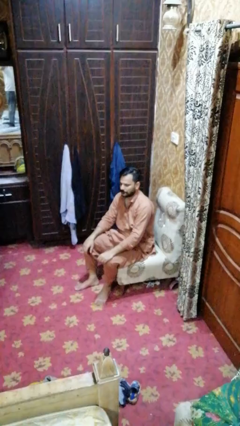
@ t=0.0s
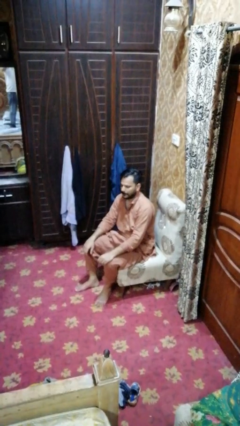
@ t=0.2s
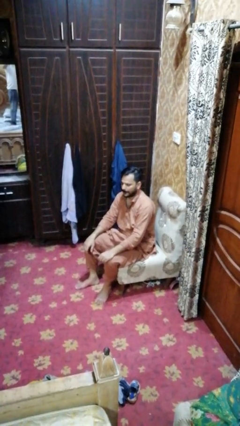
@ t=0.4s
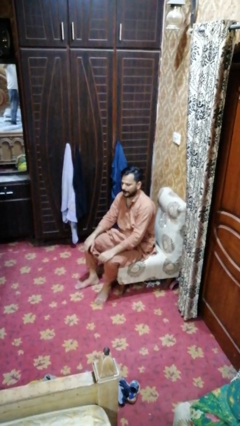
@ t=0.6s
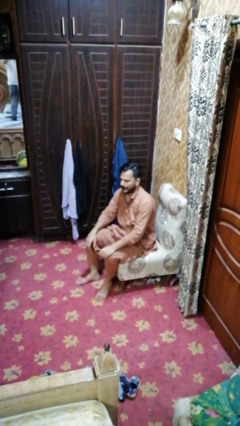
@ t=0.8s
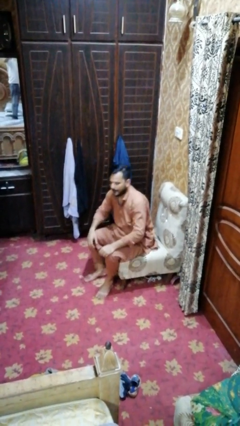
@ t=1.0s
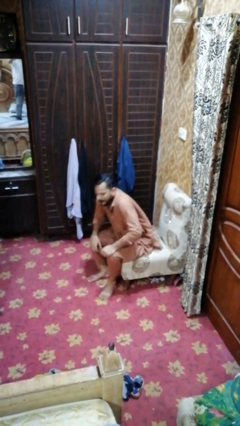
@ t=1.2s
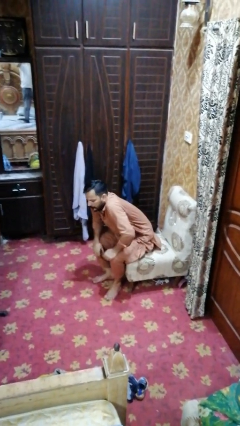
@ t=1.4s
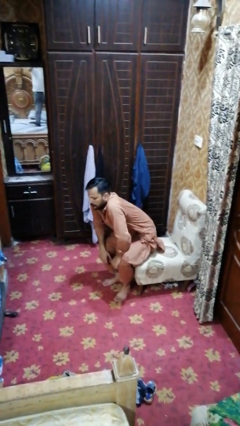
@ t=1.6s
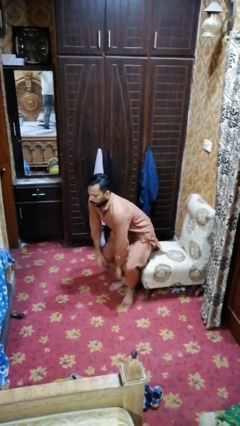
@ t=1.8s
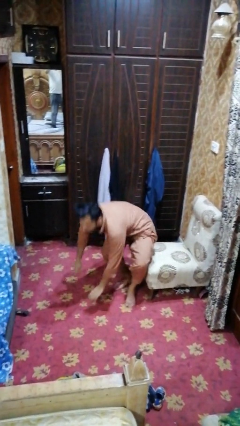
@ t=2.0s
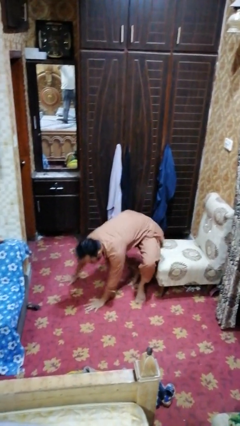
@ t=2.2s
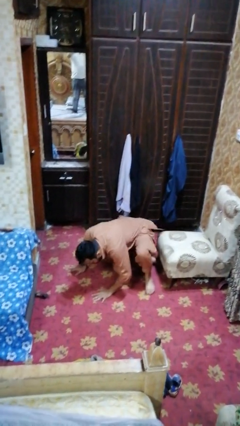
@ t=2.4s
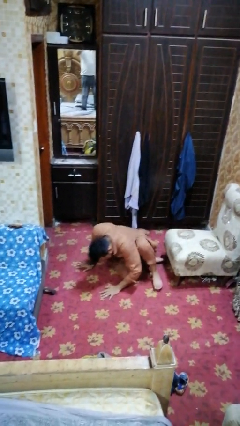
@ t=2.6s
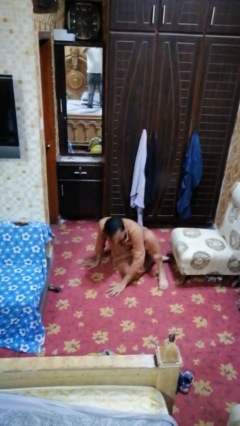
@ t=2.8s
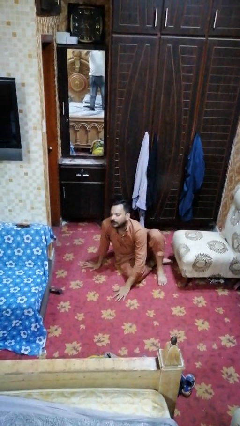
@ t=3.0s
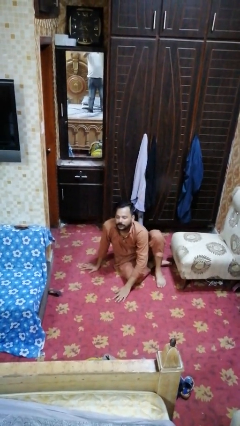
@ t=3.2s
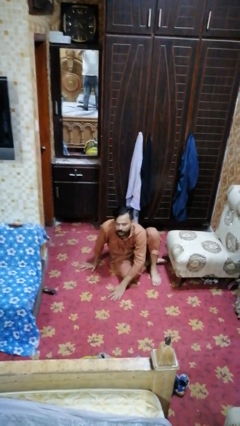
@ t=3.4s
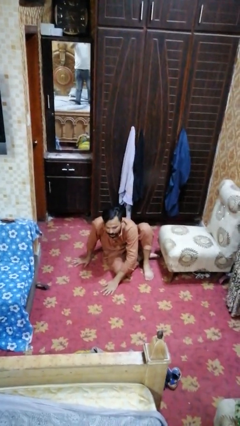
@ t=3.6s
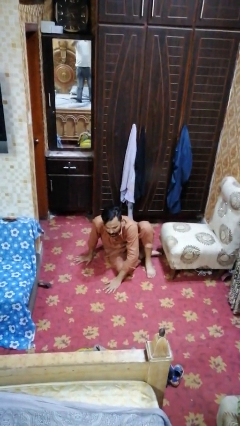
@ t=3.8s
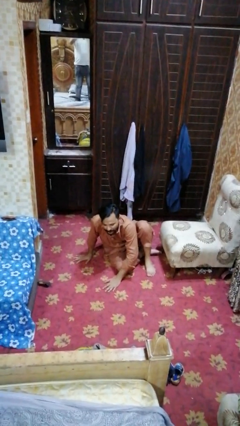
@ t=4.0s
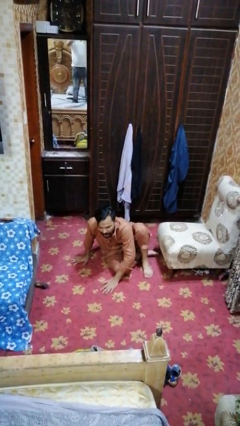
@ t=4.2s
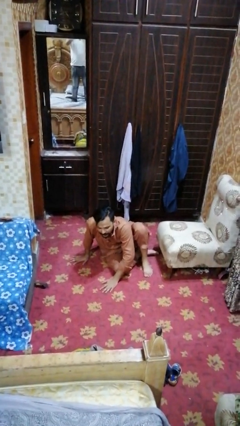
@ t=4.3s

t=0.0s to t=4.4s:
person falls from chair

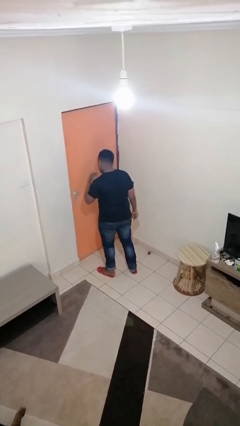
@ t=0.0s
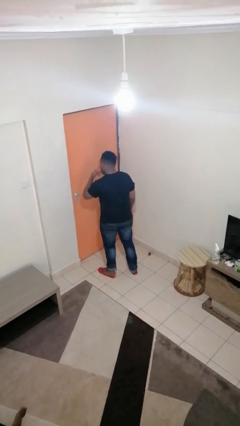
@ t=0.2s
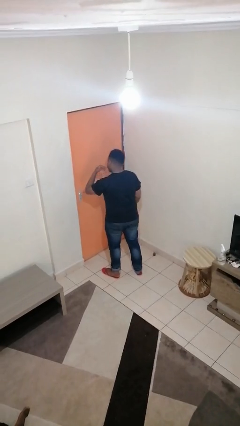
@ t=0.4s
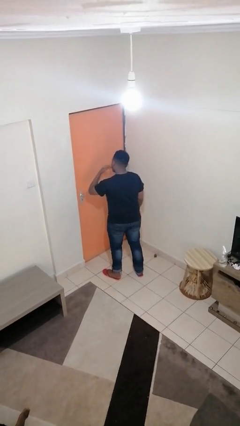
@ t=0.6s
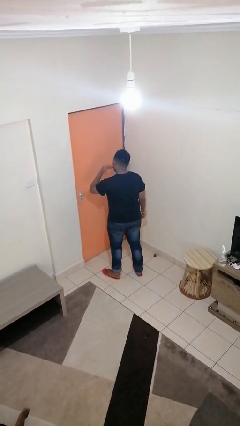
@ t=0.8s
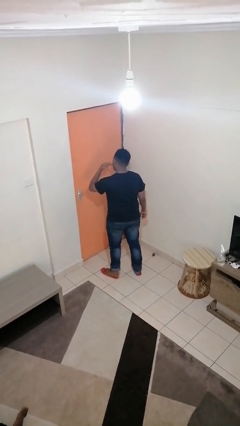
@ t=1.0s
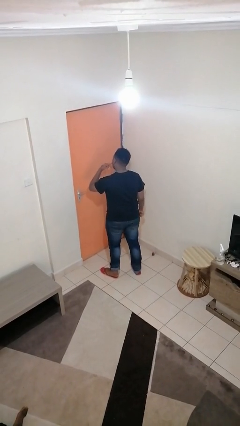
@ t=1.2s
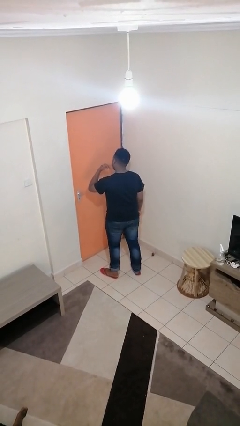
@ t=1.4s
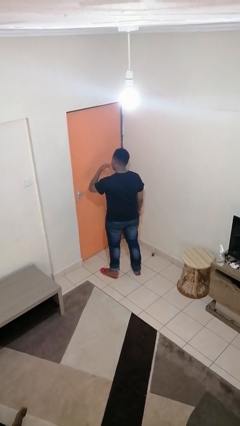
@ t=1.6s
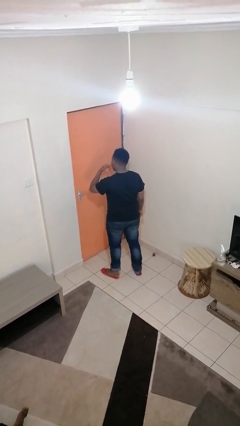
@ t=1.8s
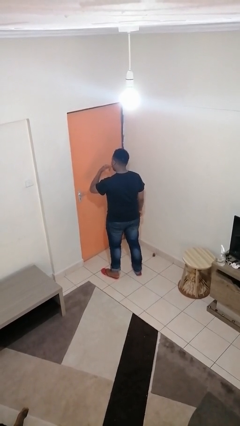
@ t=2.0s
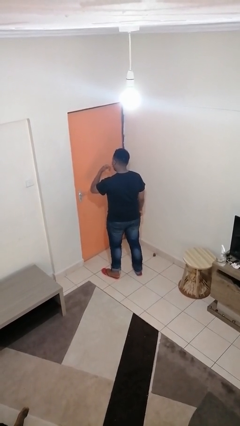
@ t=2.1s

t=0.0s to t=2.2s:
person licks fingers

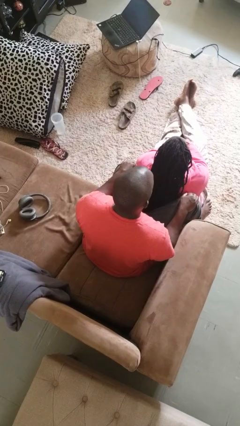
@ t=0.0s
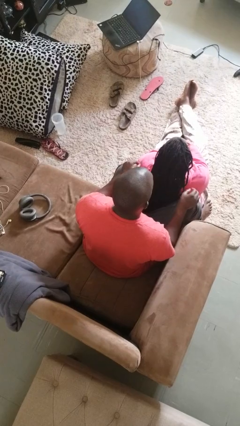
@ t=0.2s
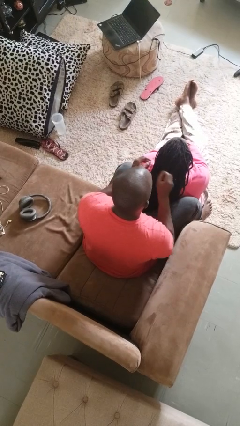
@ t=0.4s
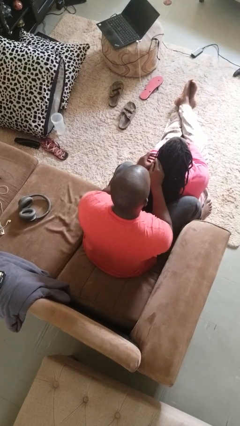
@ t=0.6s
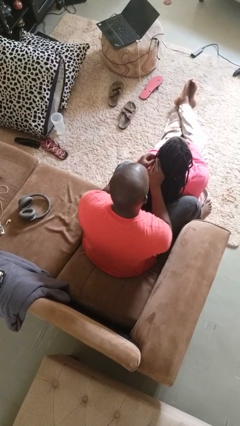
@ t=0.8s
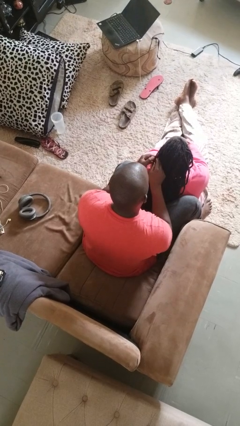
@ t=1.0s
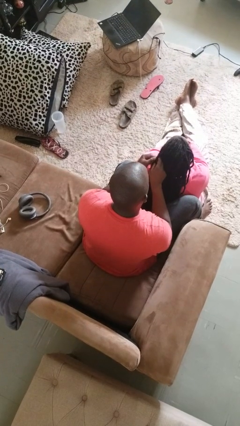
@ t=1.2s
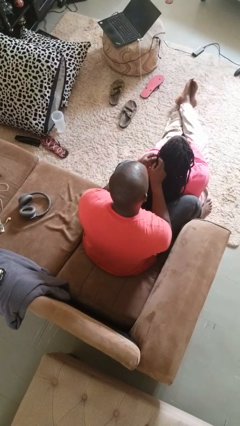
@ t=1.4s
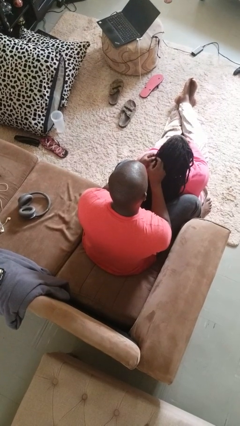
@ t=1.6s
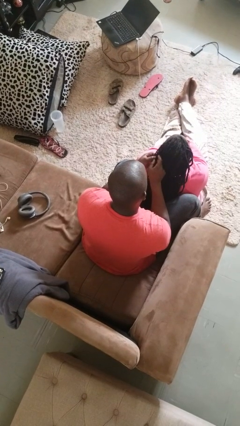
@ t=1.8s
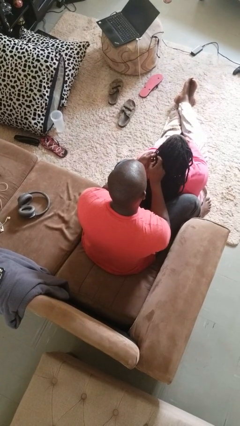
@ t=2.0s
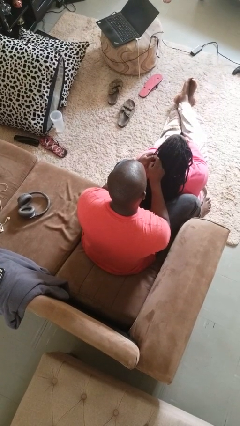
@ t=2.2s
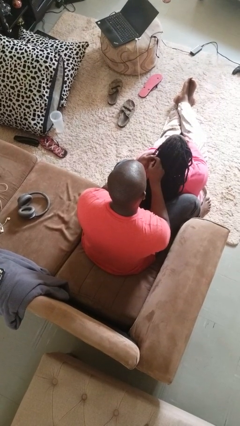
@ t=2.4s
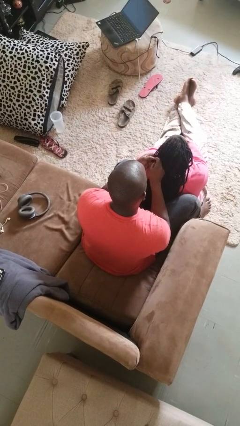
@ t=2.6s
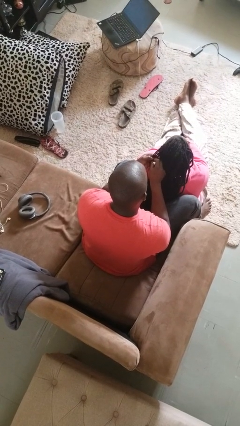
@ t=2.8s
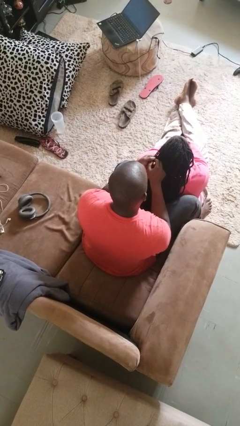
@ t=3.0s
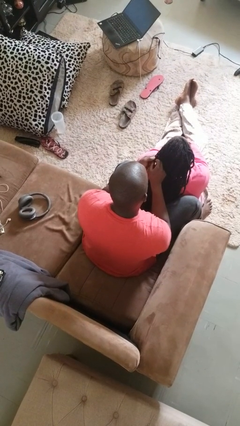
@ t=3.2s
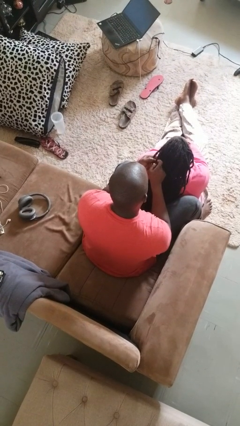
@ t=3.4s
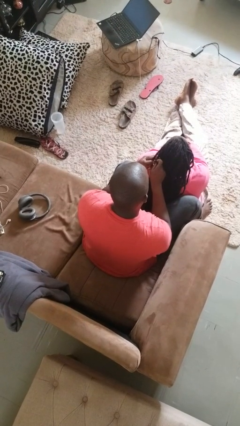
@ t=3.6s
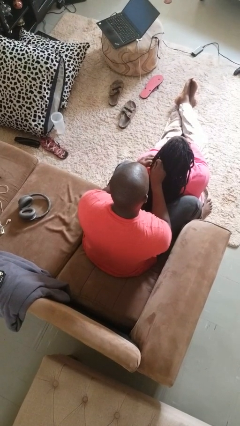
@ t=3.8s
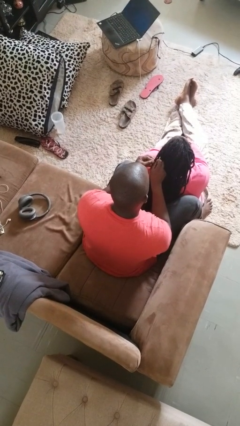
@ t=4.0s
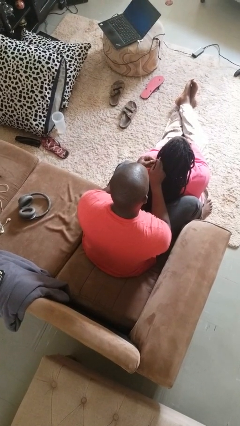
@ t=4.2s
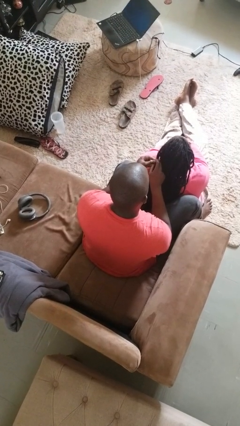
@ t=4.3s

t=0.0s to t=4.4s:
person braids hair of person

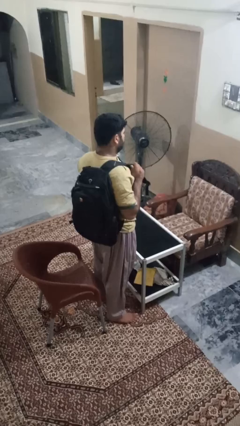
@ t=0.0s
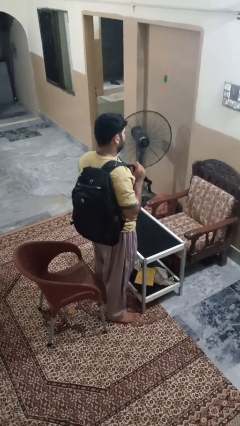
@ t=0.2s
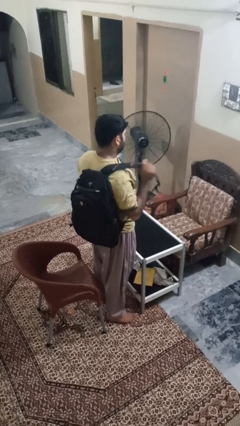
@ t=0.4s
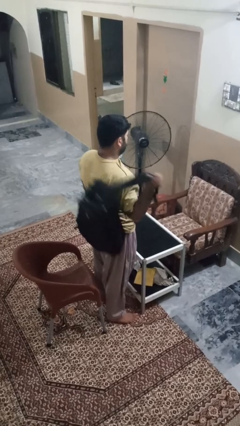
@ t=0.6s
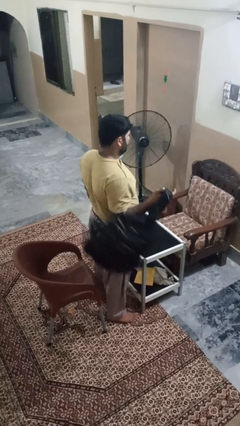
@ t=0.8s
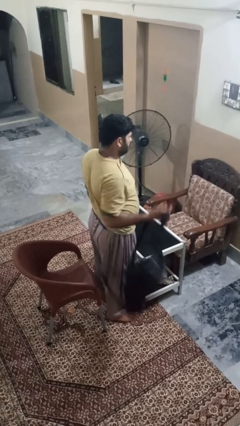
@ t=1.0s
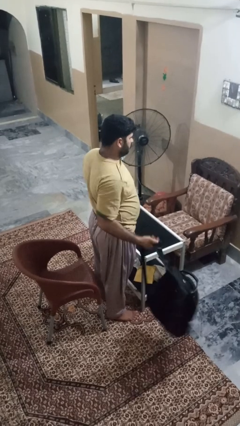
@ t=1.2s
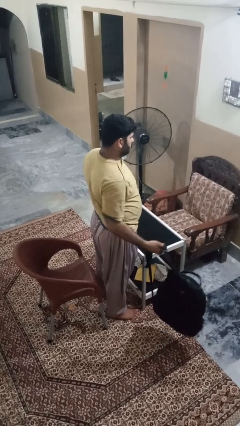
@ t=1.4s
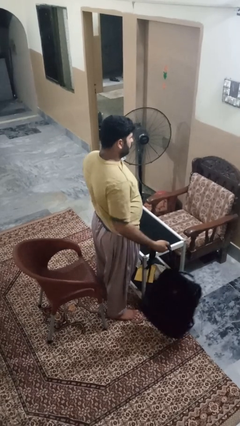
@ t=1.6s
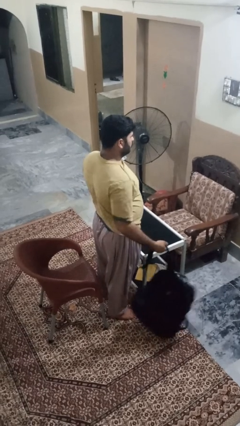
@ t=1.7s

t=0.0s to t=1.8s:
person takes off backpack

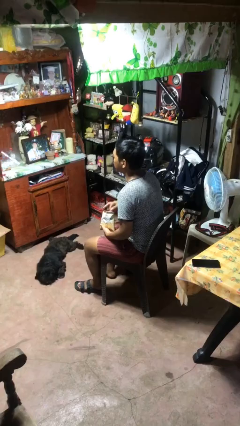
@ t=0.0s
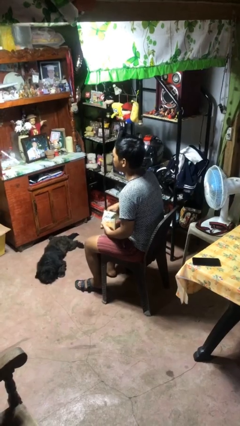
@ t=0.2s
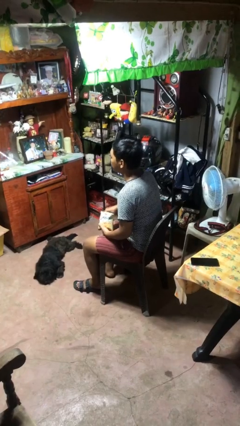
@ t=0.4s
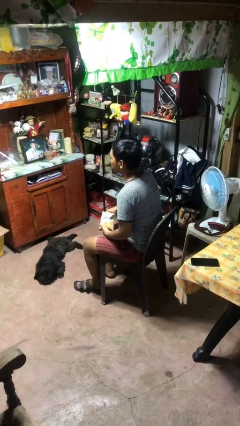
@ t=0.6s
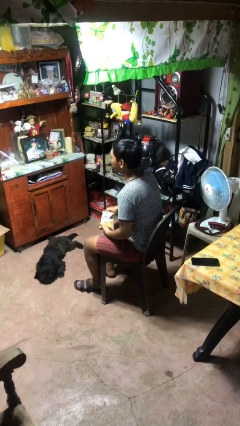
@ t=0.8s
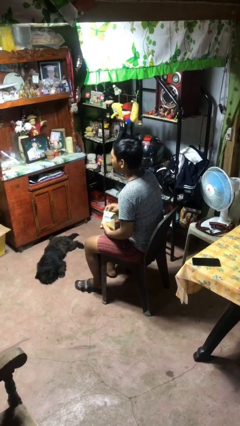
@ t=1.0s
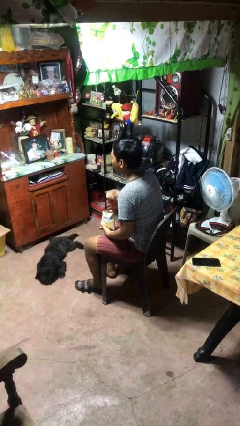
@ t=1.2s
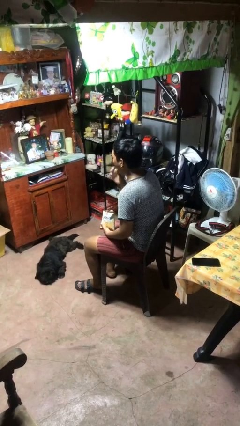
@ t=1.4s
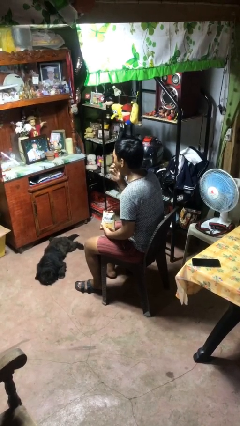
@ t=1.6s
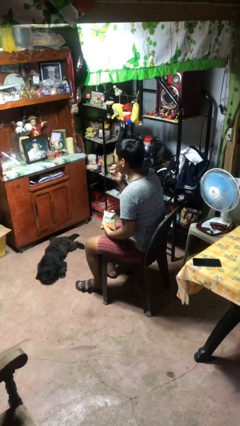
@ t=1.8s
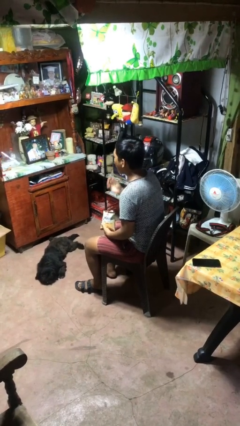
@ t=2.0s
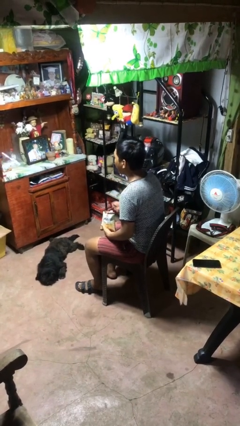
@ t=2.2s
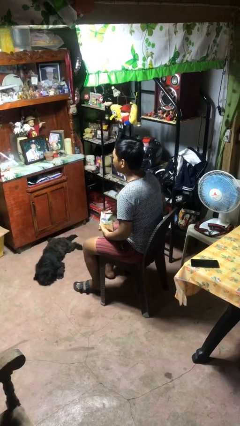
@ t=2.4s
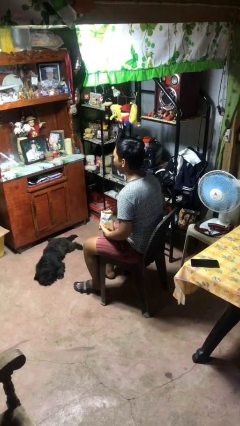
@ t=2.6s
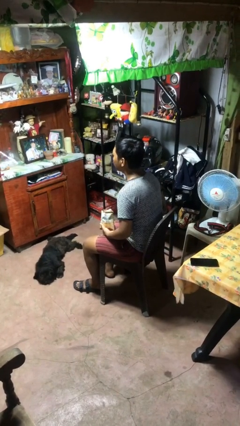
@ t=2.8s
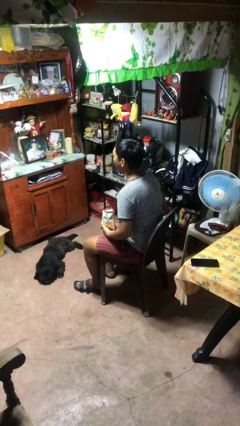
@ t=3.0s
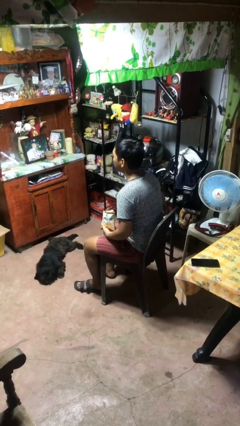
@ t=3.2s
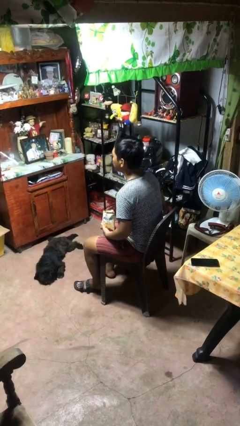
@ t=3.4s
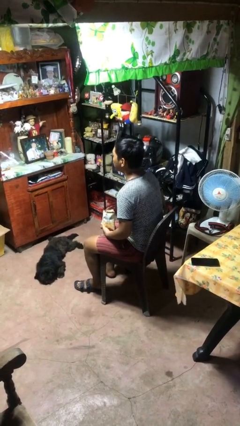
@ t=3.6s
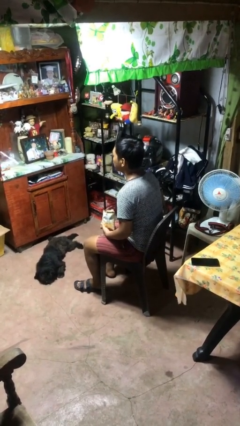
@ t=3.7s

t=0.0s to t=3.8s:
person eats snack from bag

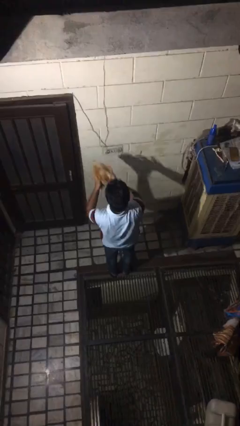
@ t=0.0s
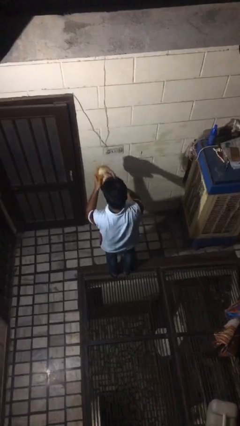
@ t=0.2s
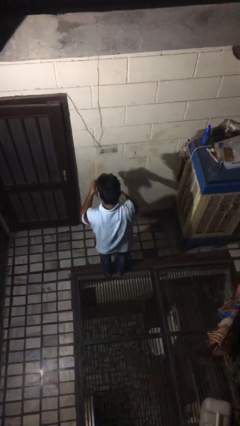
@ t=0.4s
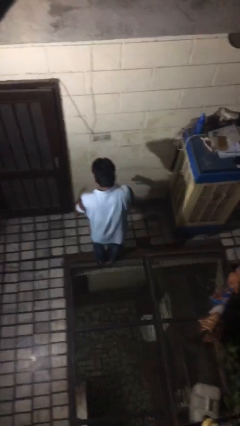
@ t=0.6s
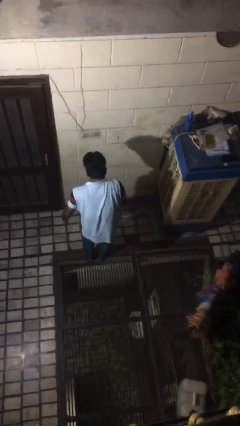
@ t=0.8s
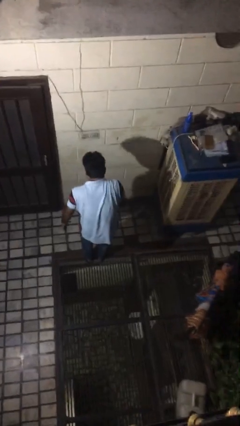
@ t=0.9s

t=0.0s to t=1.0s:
person catches dropped object
